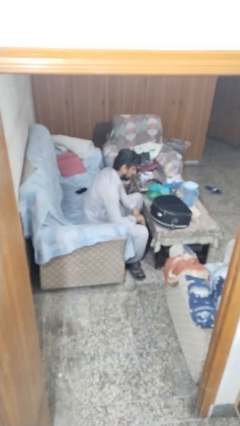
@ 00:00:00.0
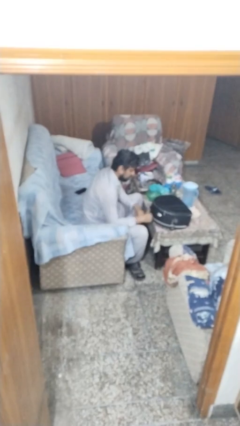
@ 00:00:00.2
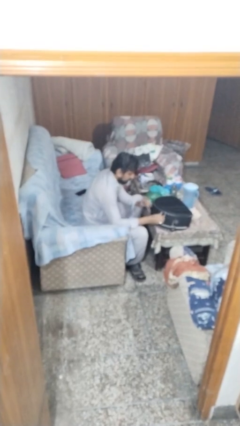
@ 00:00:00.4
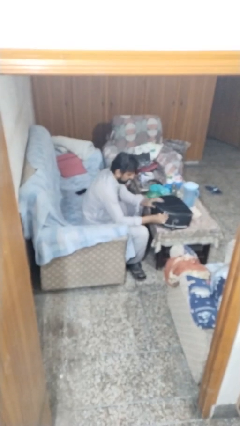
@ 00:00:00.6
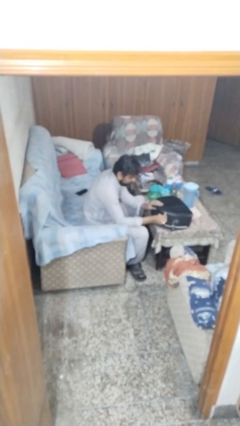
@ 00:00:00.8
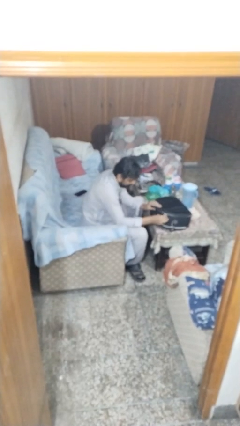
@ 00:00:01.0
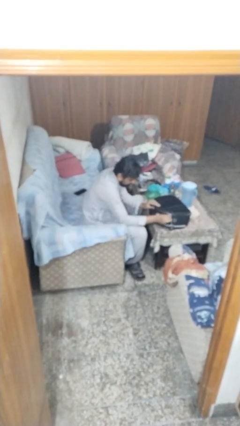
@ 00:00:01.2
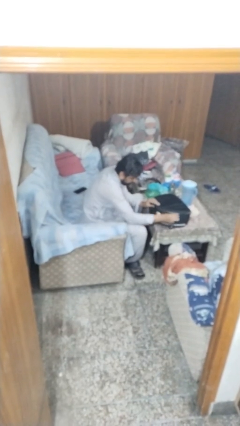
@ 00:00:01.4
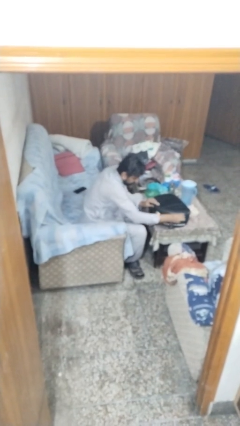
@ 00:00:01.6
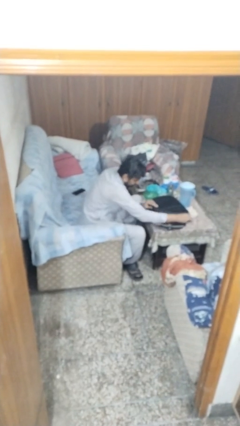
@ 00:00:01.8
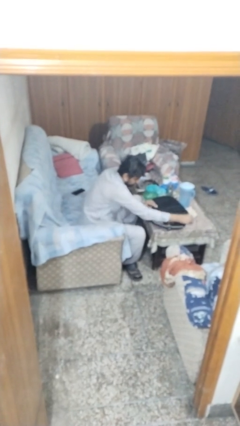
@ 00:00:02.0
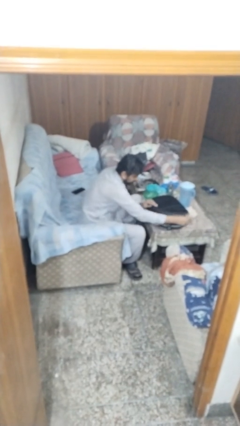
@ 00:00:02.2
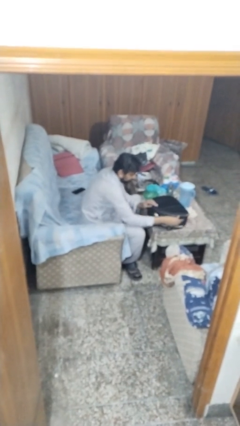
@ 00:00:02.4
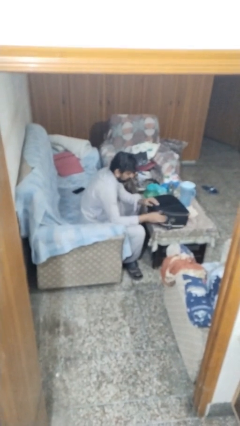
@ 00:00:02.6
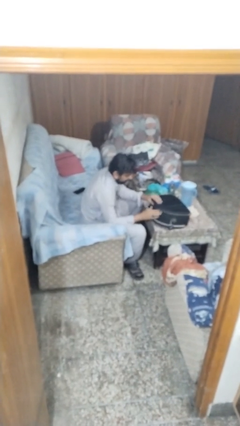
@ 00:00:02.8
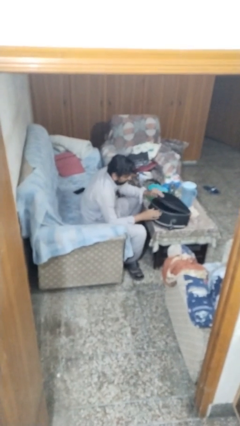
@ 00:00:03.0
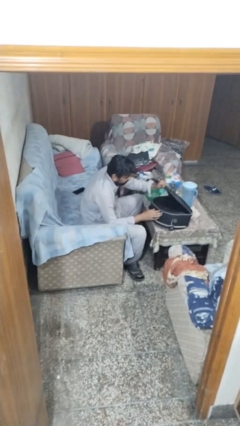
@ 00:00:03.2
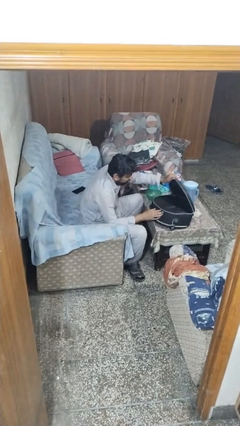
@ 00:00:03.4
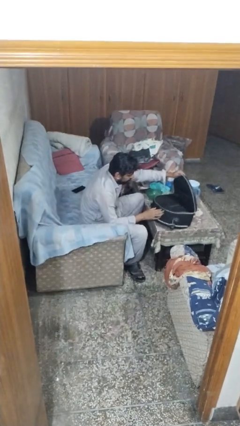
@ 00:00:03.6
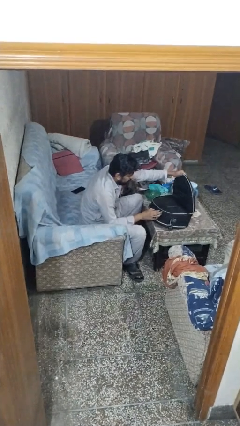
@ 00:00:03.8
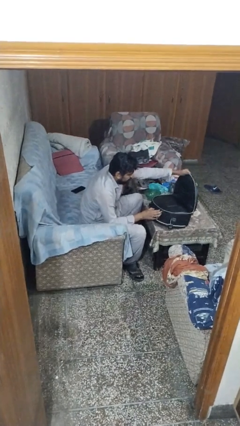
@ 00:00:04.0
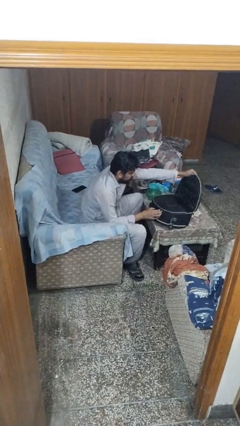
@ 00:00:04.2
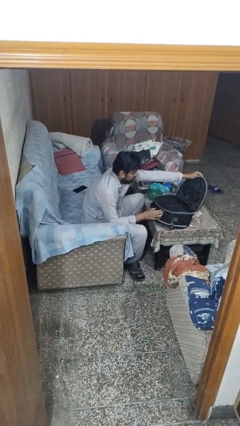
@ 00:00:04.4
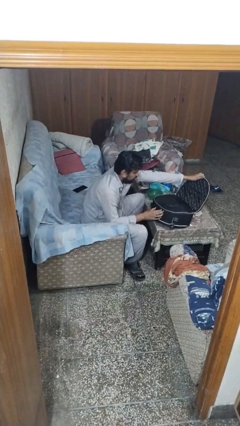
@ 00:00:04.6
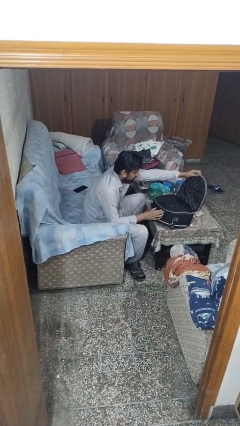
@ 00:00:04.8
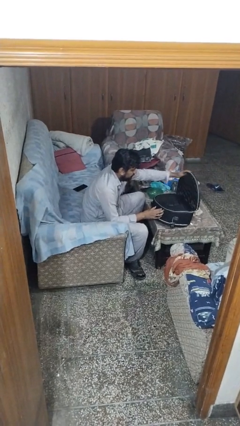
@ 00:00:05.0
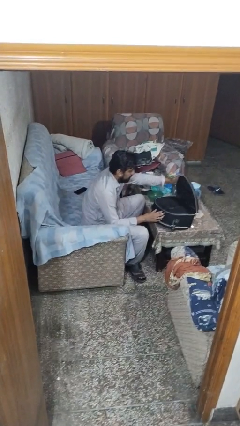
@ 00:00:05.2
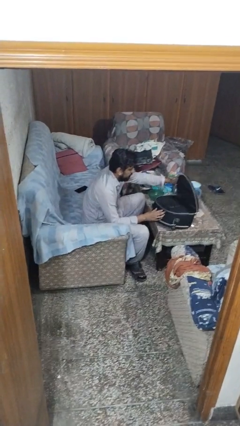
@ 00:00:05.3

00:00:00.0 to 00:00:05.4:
person opens suitcase

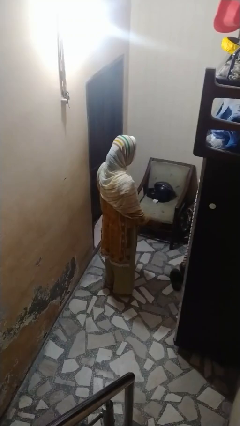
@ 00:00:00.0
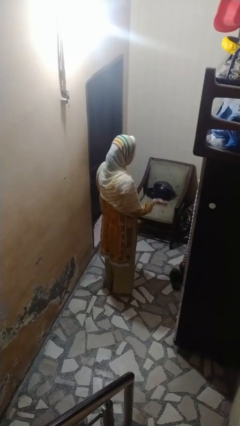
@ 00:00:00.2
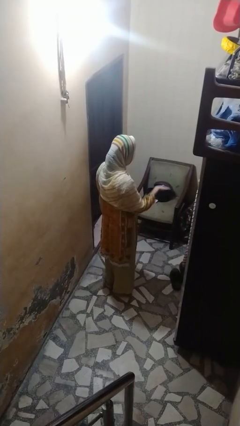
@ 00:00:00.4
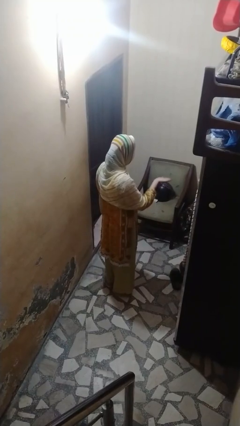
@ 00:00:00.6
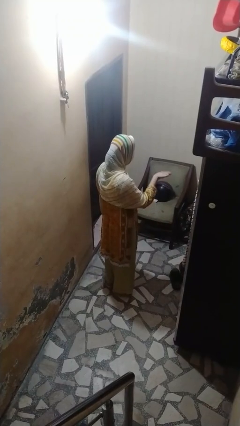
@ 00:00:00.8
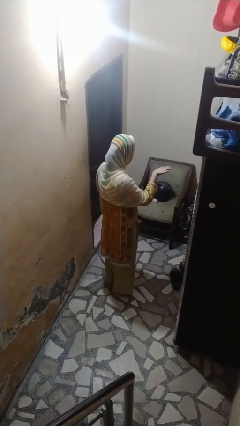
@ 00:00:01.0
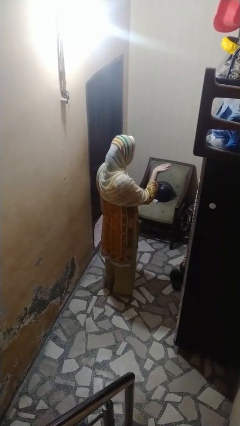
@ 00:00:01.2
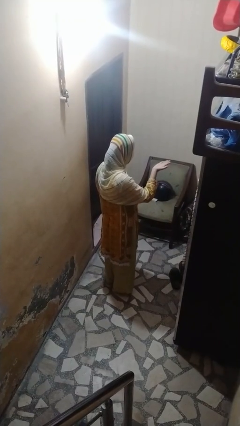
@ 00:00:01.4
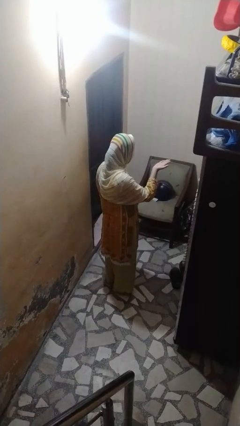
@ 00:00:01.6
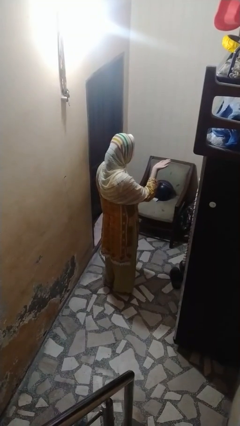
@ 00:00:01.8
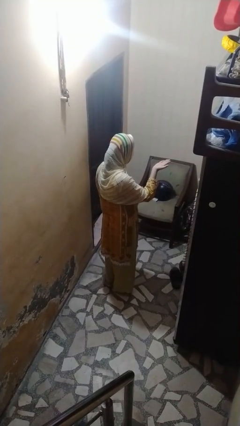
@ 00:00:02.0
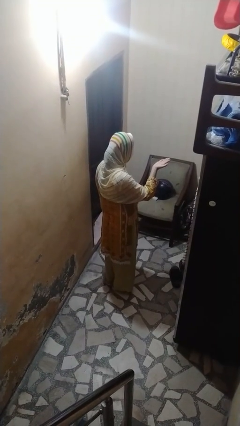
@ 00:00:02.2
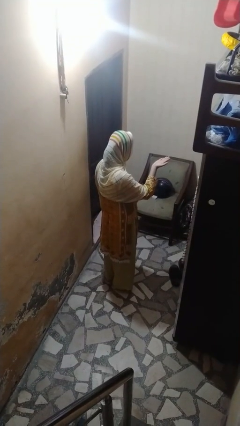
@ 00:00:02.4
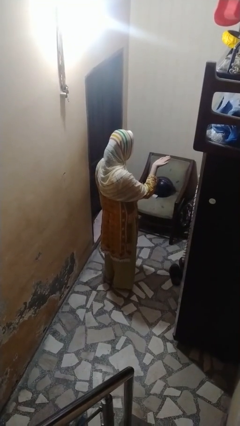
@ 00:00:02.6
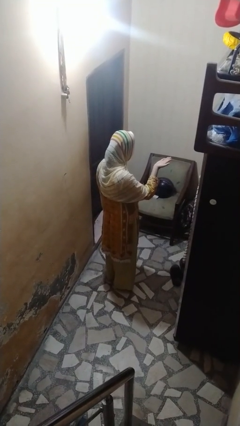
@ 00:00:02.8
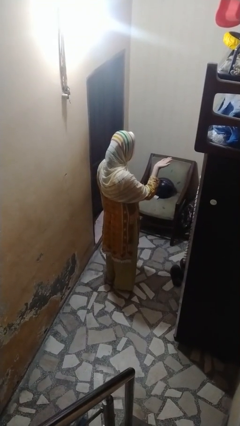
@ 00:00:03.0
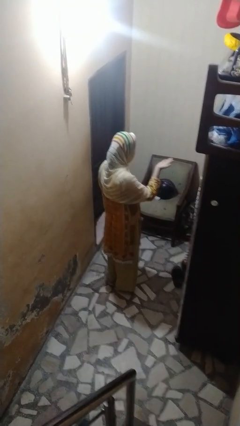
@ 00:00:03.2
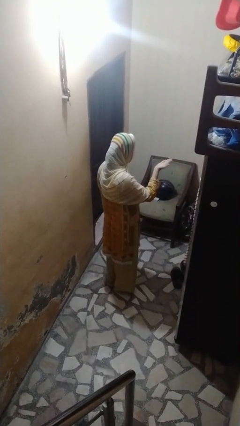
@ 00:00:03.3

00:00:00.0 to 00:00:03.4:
person gestures swipe up

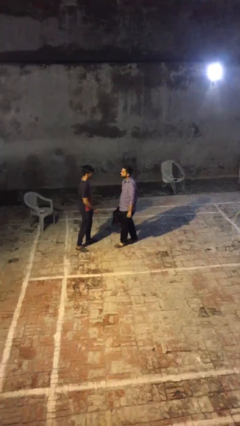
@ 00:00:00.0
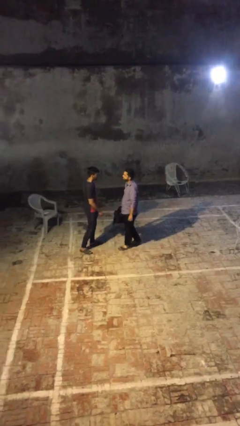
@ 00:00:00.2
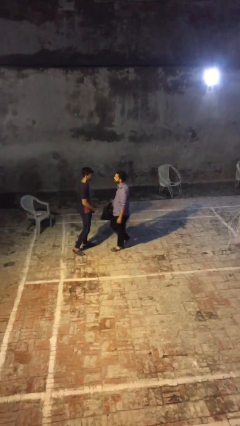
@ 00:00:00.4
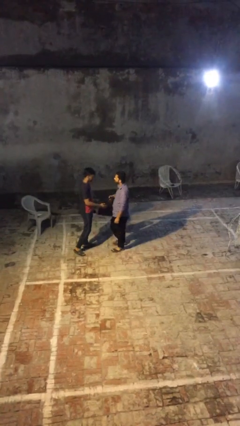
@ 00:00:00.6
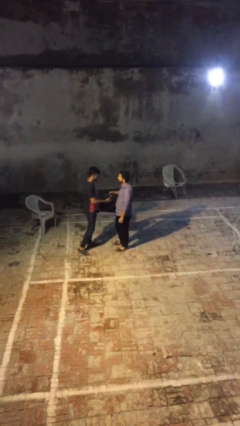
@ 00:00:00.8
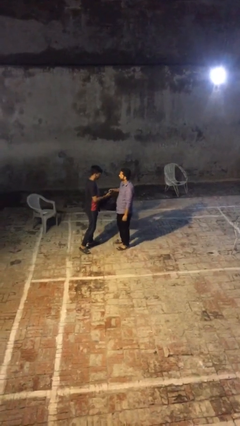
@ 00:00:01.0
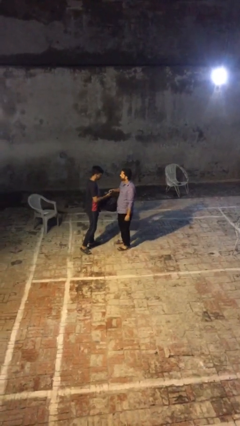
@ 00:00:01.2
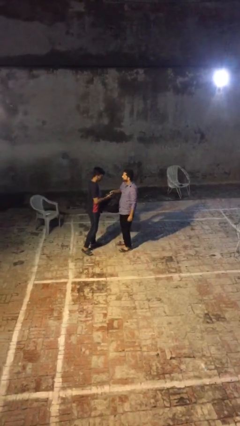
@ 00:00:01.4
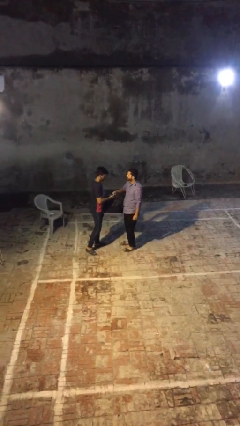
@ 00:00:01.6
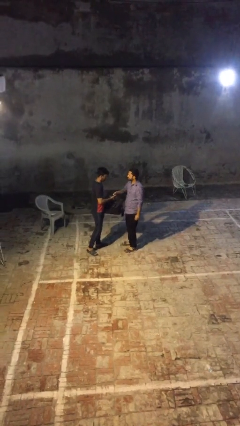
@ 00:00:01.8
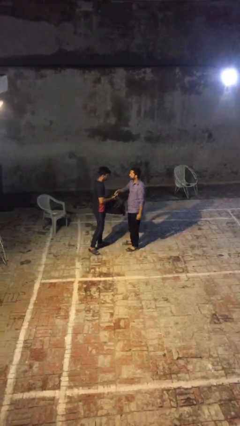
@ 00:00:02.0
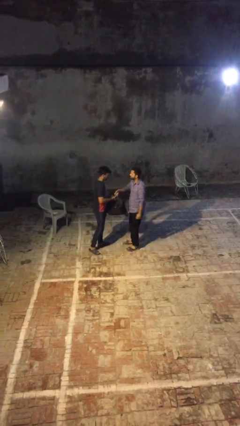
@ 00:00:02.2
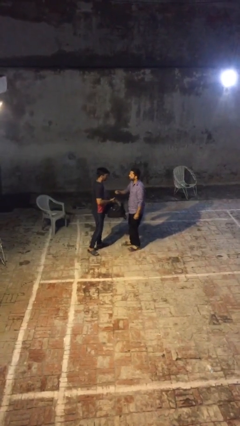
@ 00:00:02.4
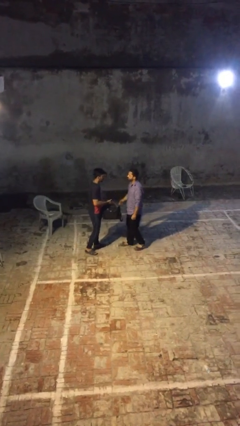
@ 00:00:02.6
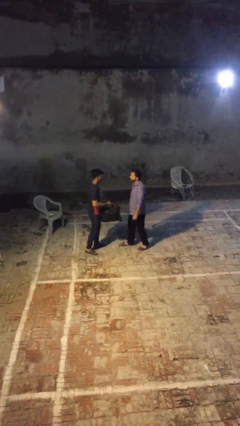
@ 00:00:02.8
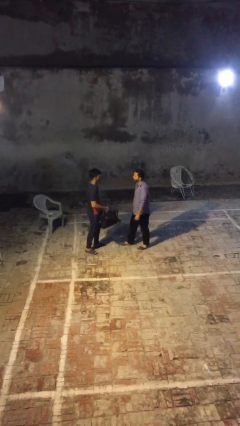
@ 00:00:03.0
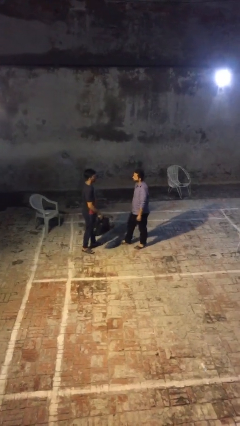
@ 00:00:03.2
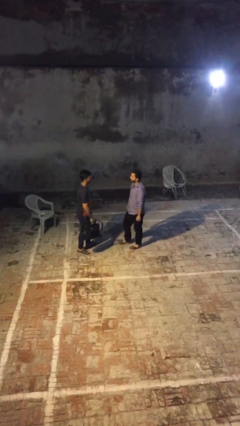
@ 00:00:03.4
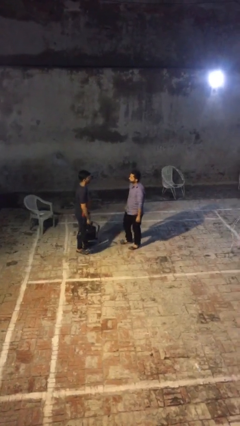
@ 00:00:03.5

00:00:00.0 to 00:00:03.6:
person transfers object to person

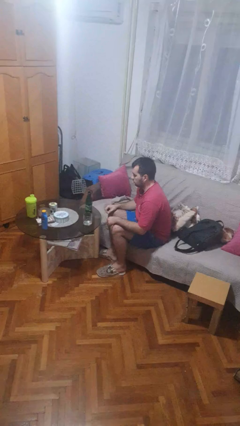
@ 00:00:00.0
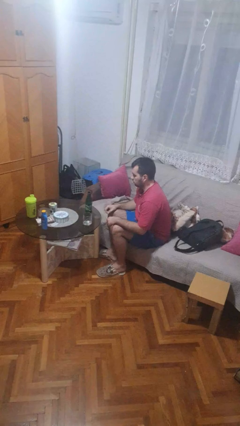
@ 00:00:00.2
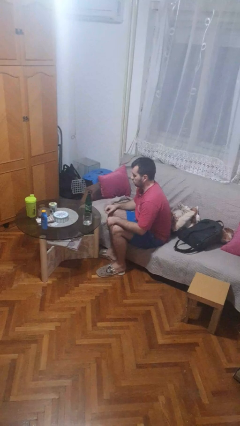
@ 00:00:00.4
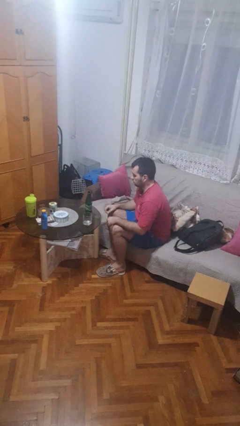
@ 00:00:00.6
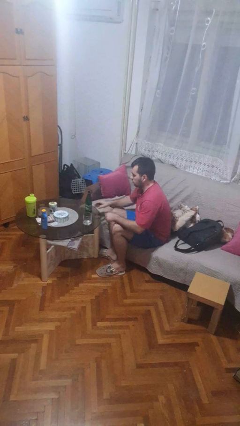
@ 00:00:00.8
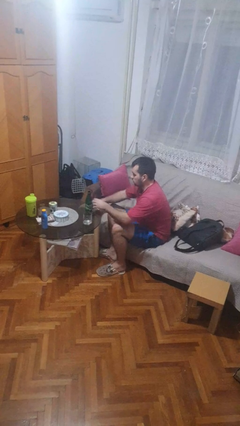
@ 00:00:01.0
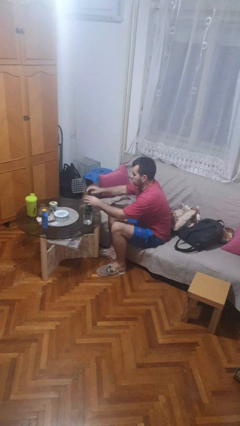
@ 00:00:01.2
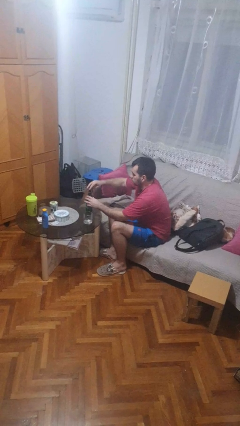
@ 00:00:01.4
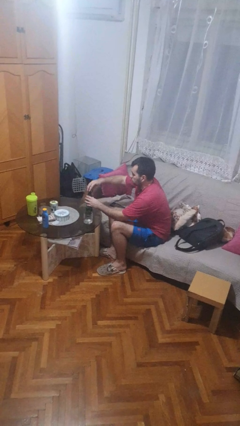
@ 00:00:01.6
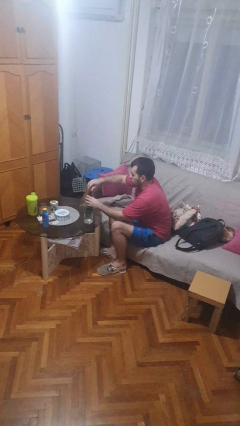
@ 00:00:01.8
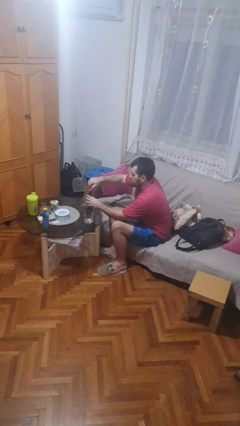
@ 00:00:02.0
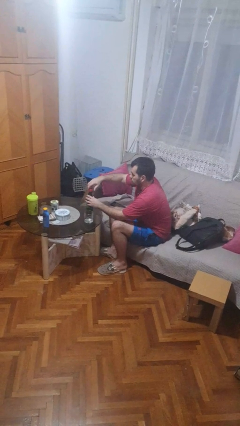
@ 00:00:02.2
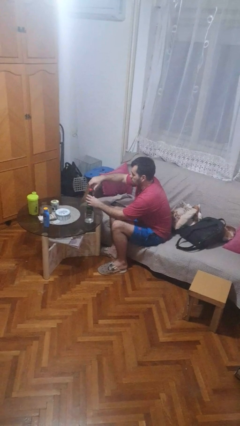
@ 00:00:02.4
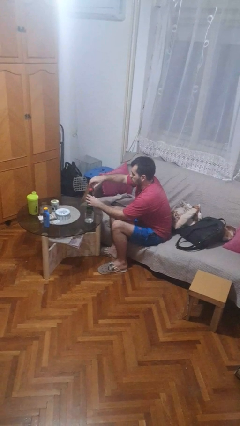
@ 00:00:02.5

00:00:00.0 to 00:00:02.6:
person screws lid to bottle

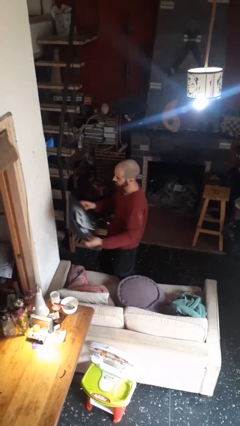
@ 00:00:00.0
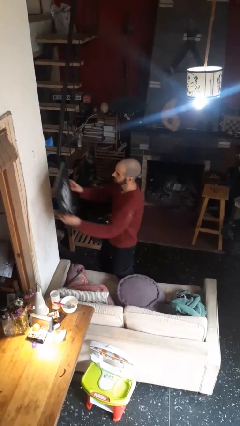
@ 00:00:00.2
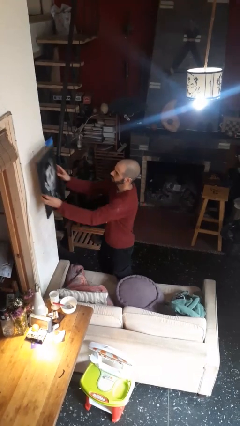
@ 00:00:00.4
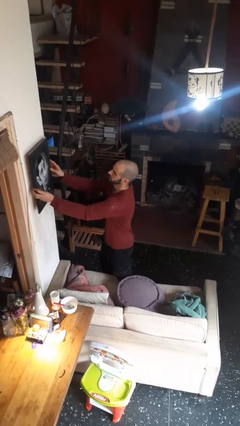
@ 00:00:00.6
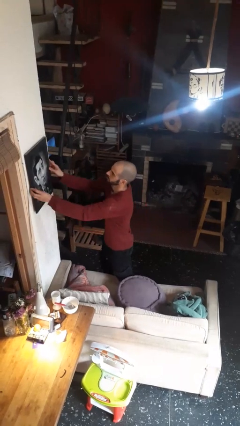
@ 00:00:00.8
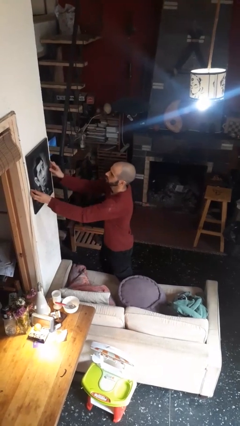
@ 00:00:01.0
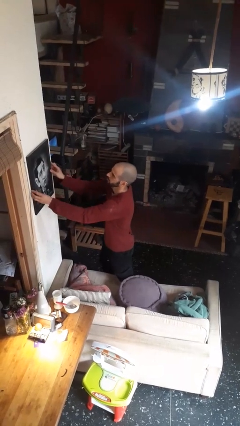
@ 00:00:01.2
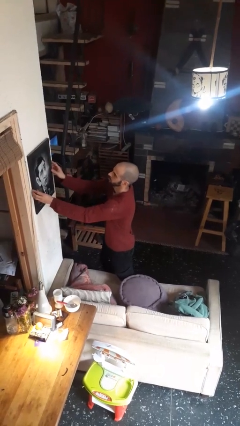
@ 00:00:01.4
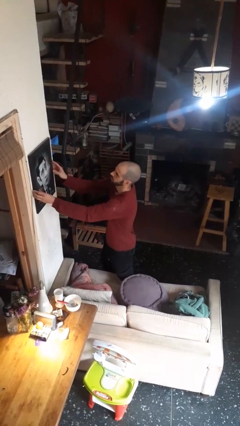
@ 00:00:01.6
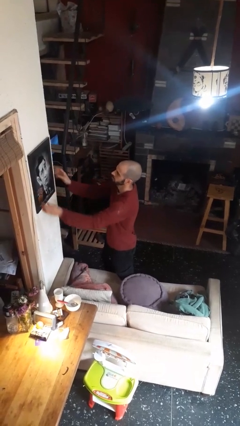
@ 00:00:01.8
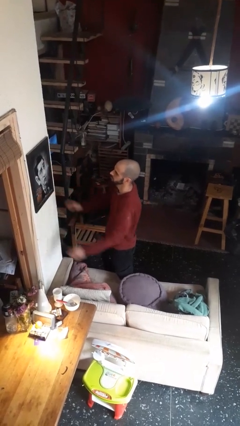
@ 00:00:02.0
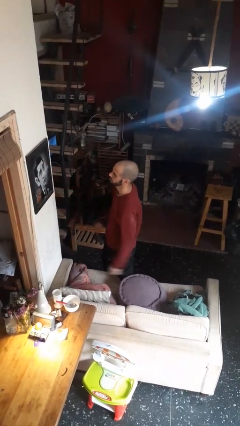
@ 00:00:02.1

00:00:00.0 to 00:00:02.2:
person puts up picture frame

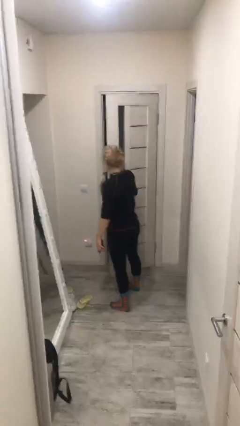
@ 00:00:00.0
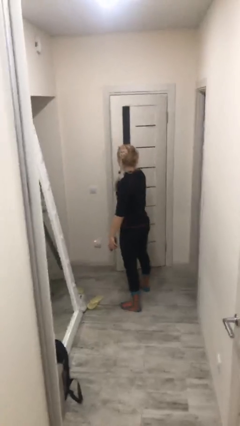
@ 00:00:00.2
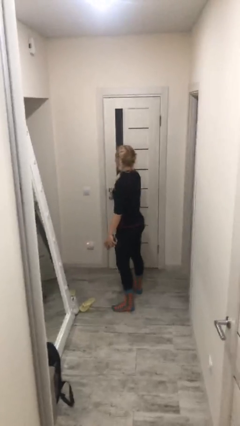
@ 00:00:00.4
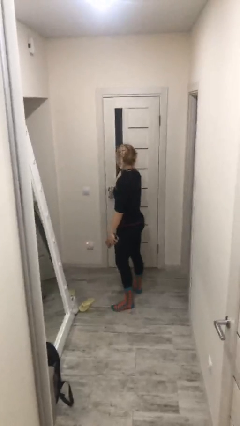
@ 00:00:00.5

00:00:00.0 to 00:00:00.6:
person closes facility door
